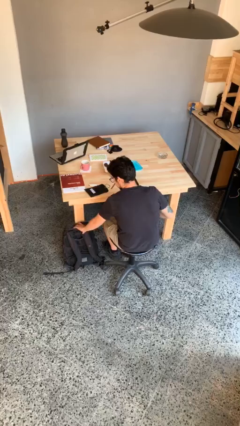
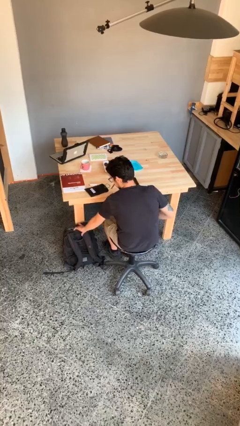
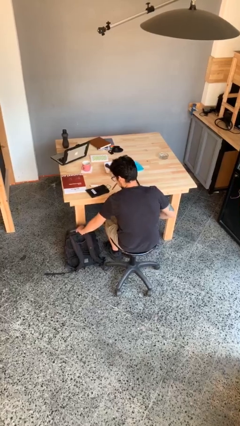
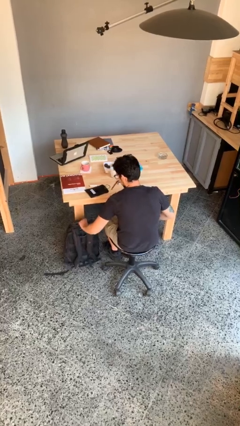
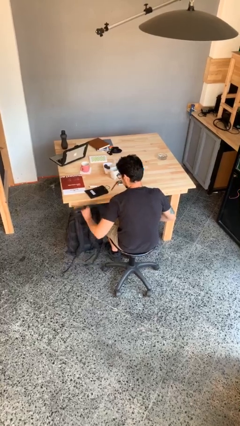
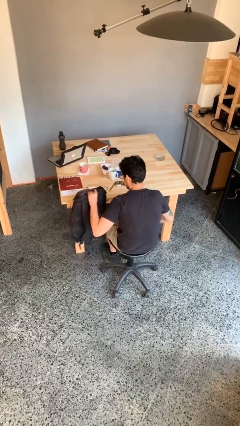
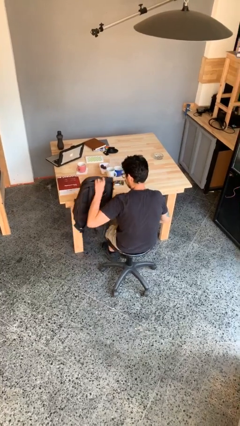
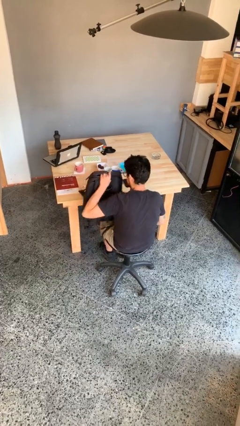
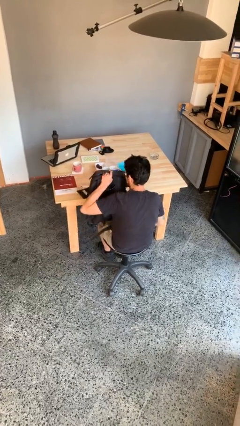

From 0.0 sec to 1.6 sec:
person picks up object from floor

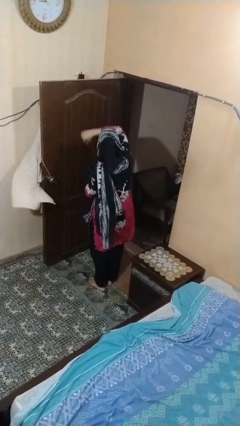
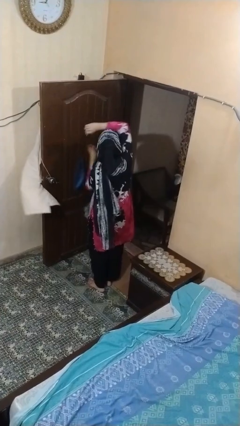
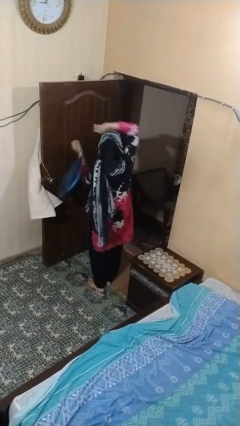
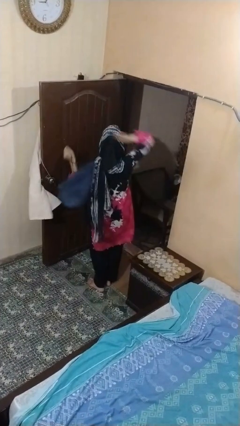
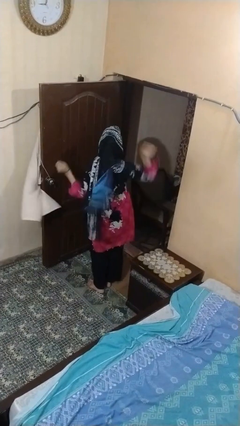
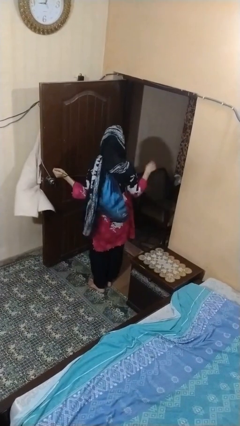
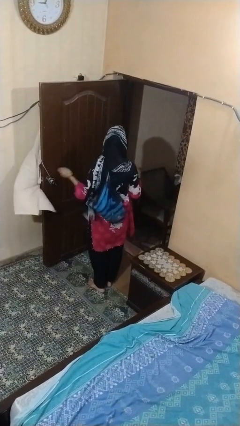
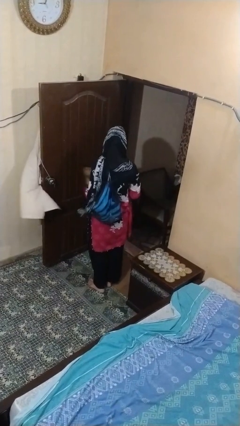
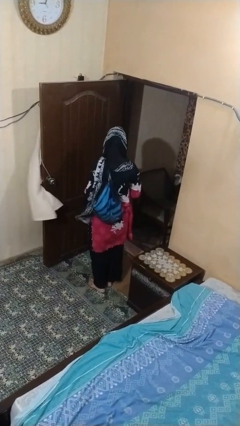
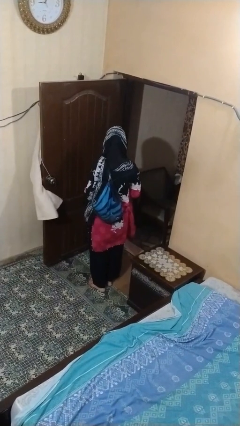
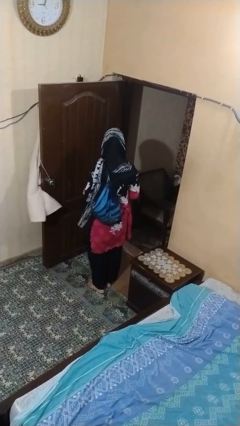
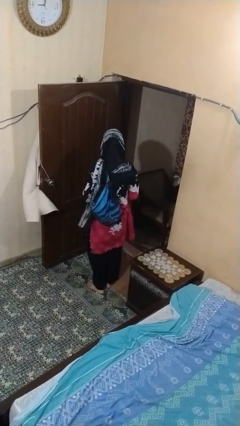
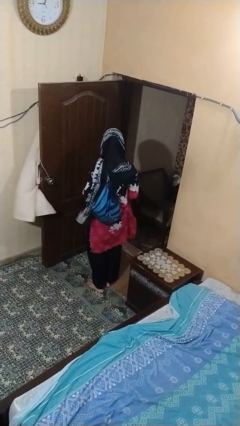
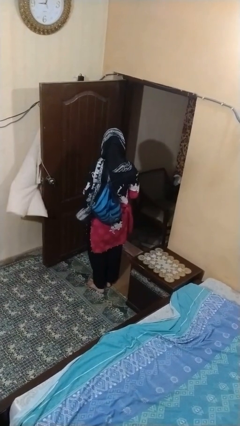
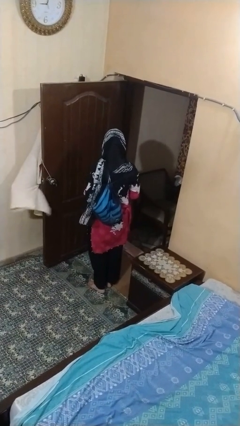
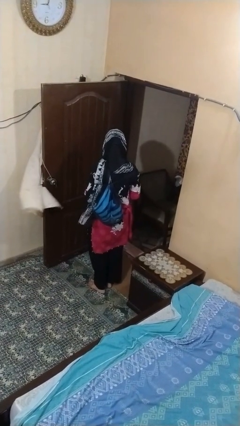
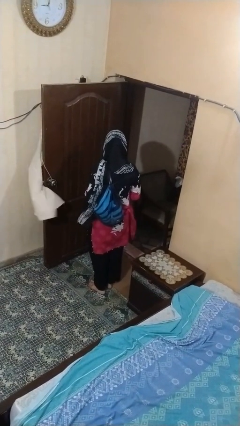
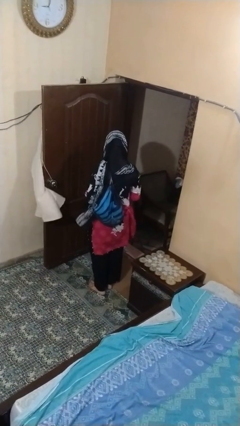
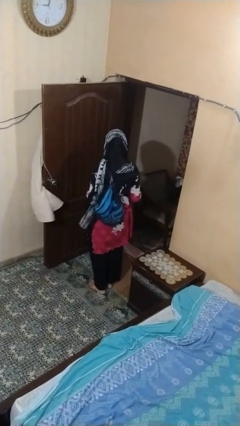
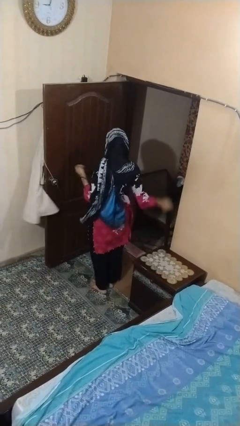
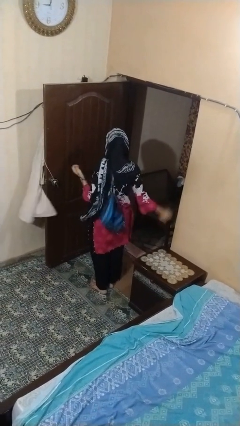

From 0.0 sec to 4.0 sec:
person puts on backpack

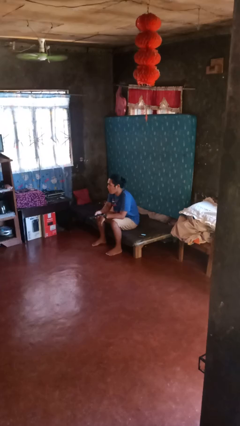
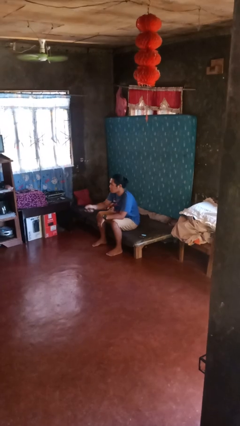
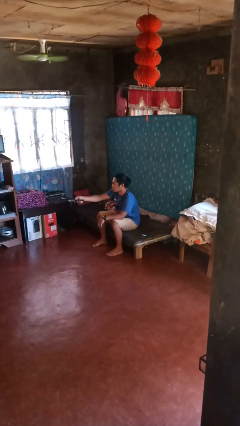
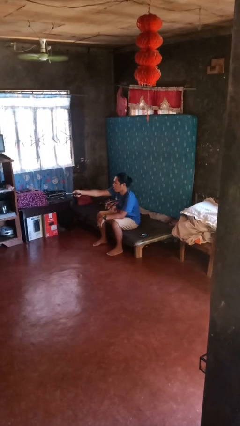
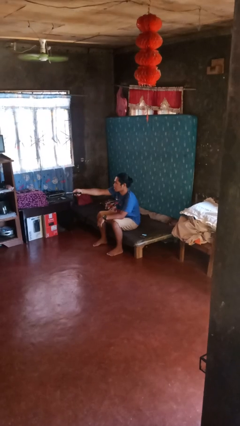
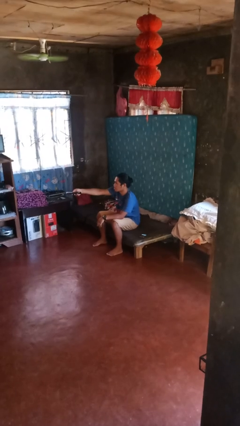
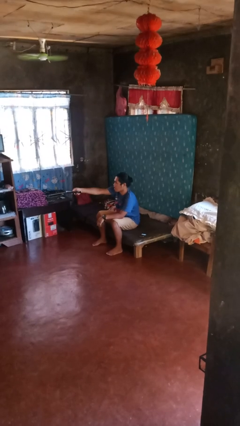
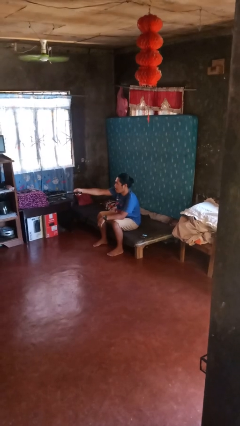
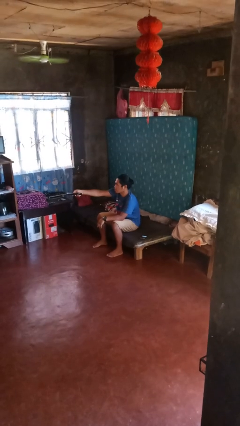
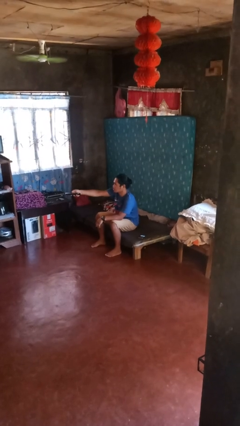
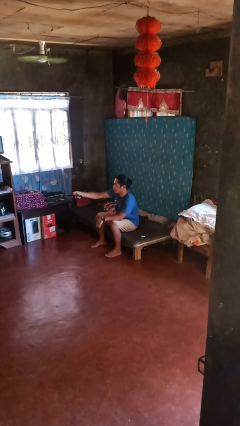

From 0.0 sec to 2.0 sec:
person uses television remote

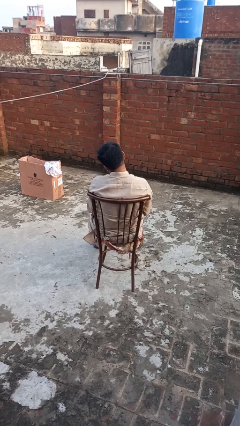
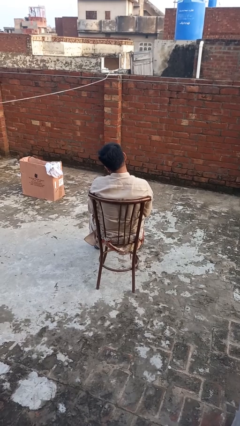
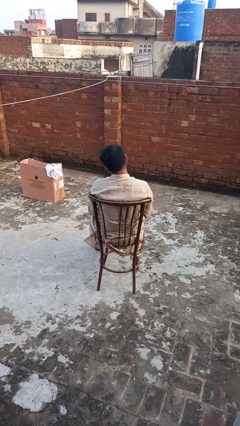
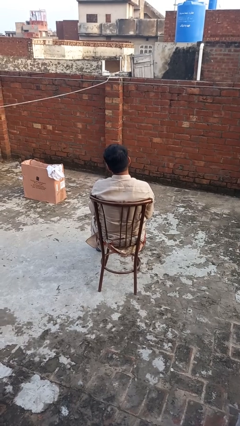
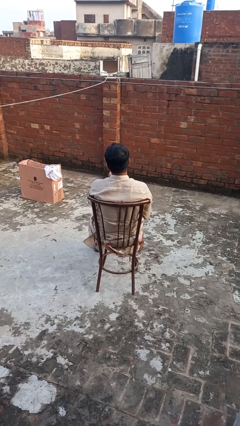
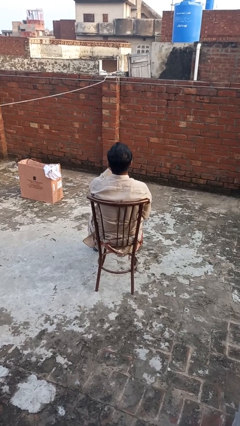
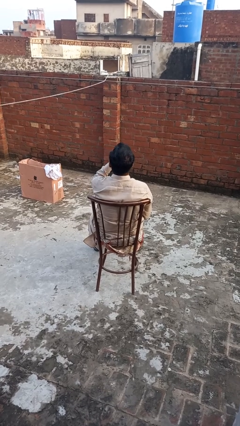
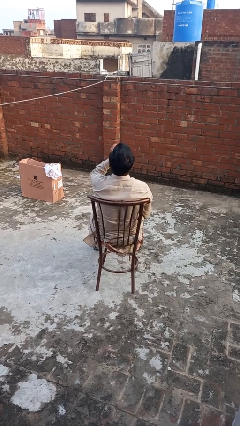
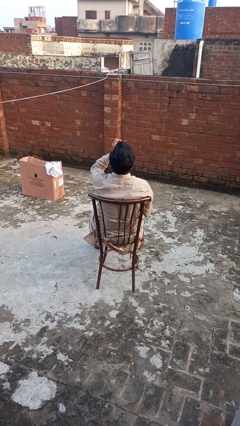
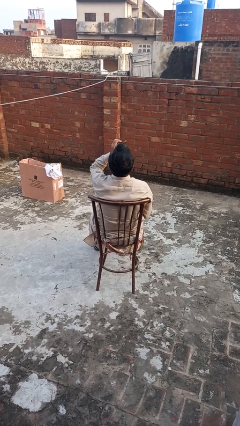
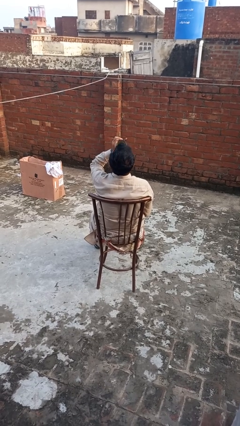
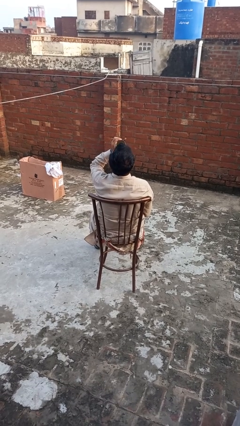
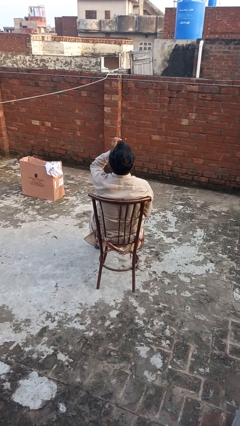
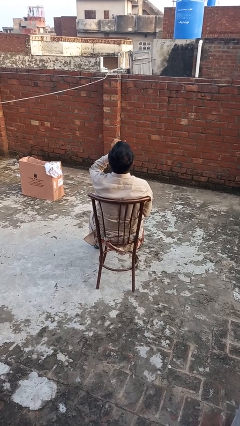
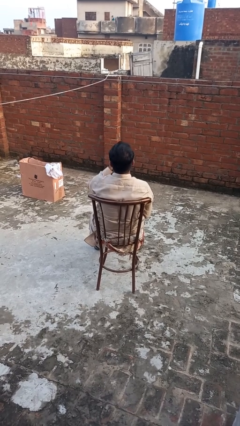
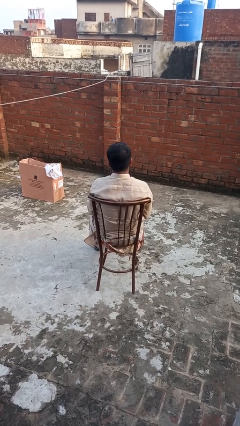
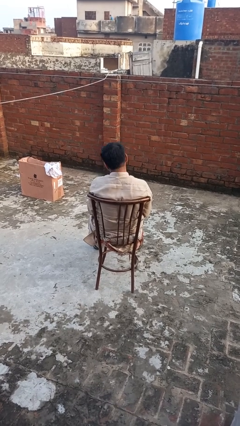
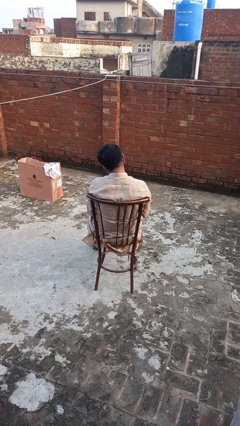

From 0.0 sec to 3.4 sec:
person drinks from mug

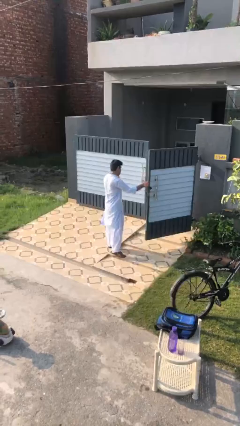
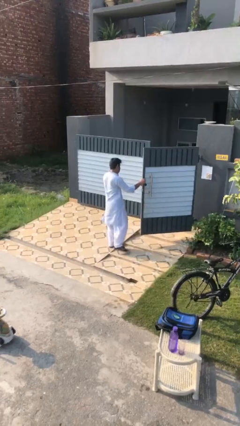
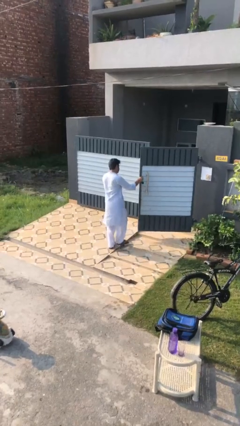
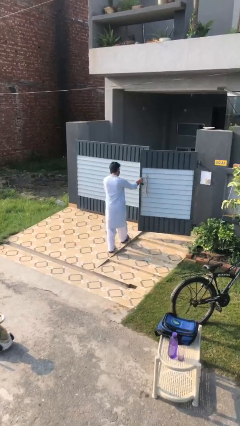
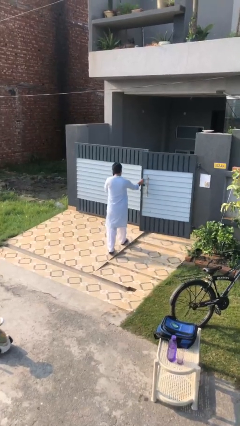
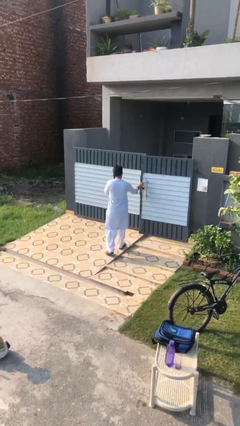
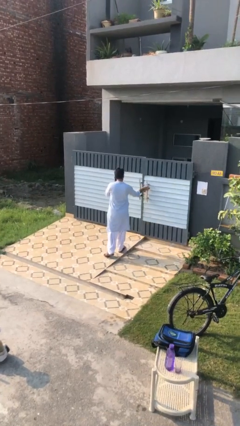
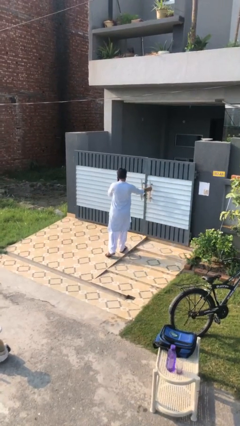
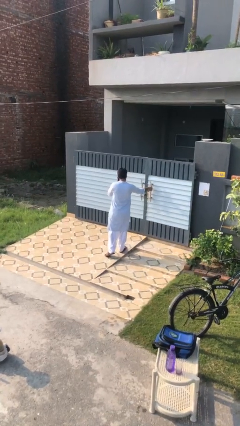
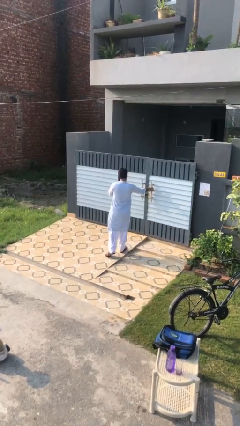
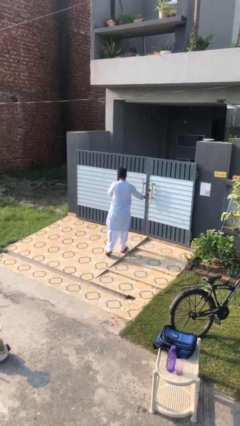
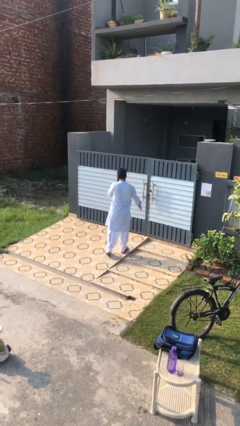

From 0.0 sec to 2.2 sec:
person closes facility door

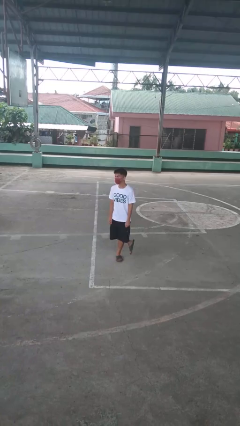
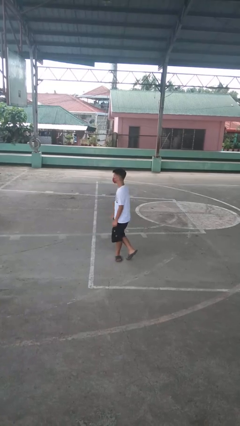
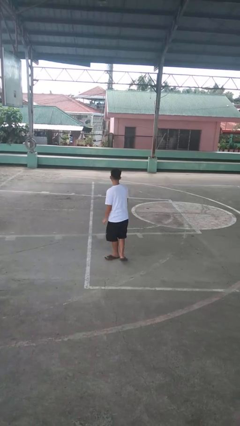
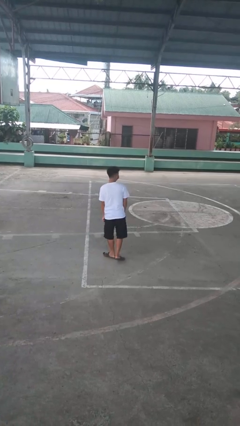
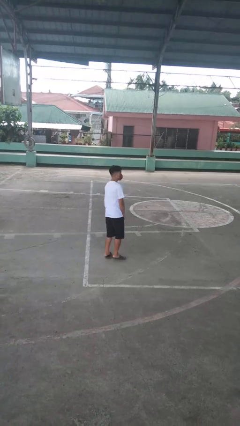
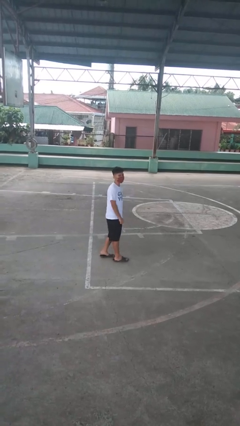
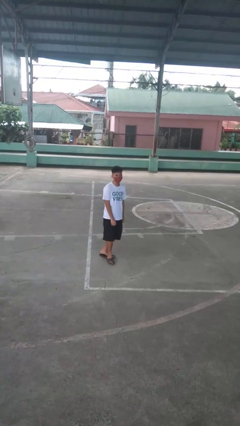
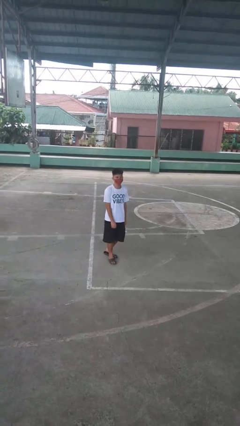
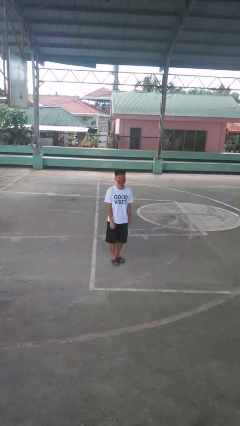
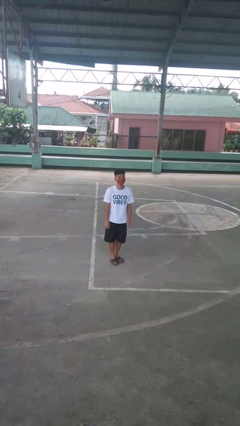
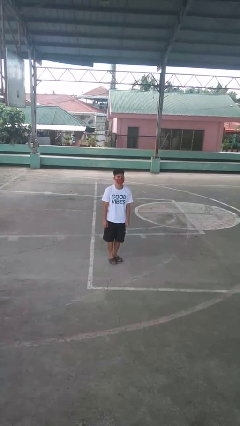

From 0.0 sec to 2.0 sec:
person twirls

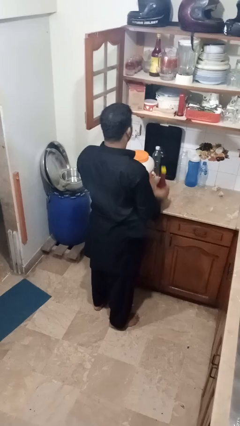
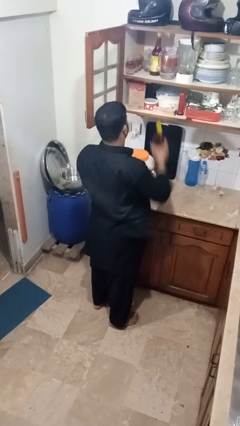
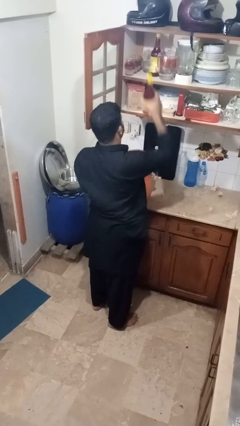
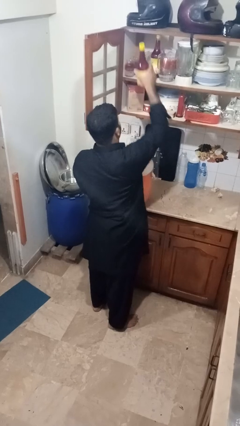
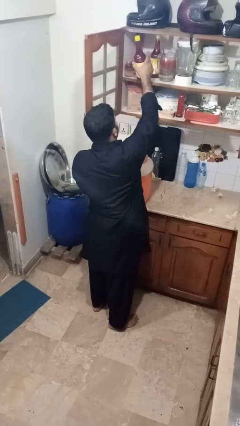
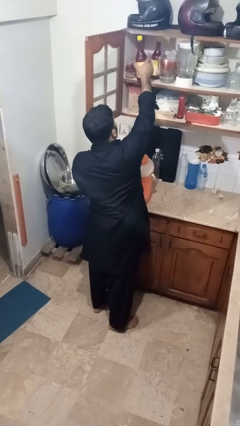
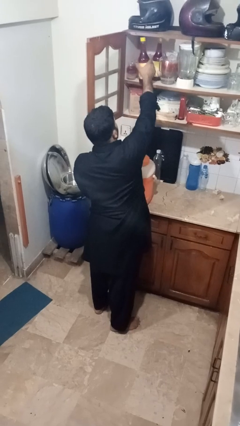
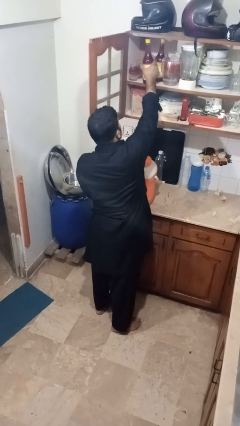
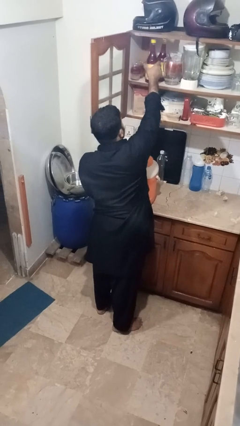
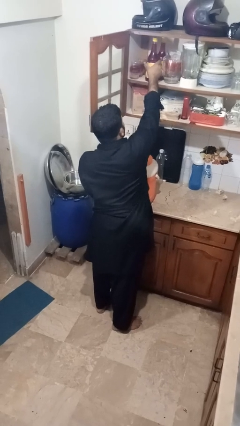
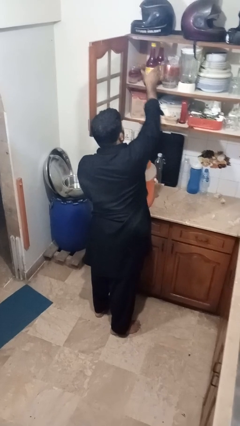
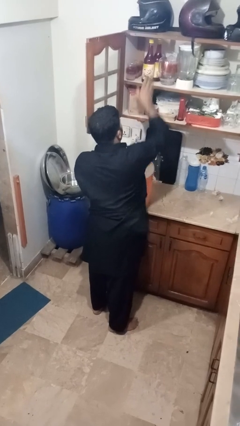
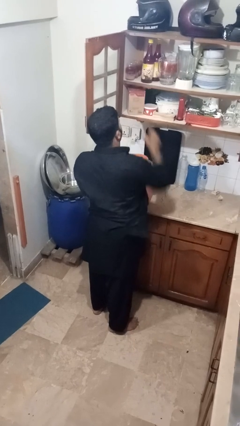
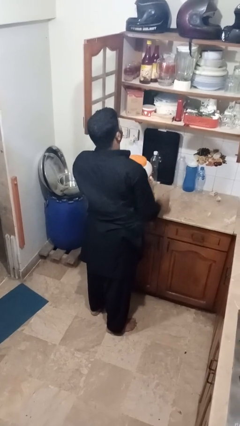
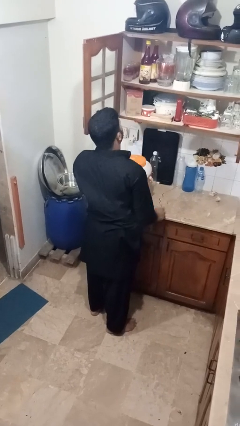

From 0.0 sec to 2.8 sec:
person puts down object into cabinet
